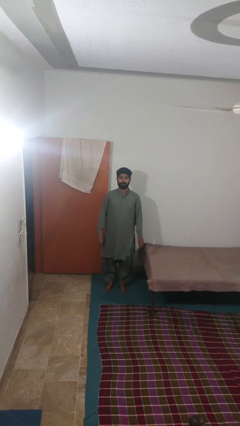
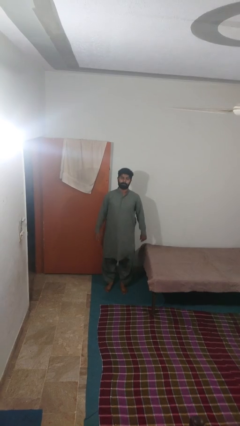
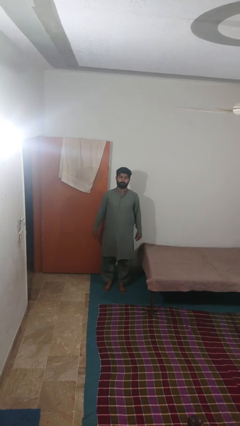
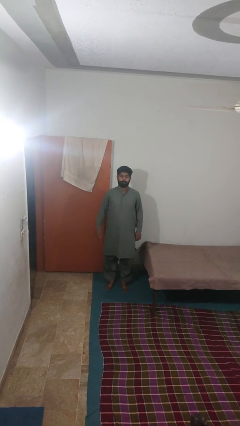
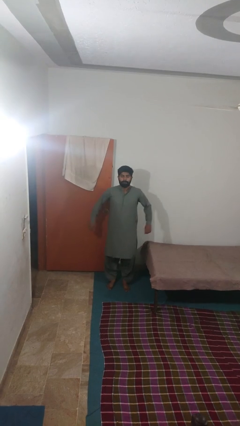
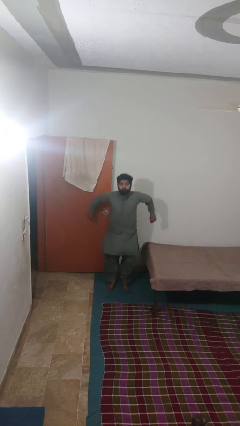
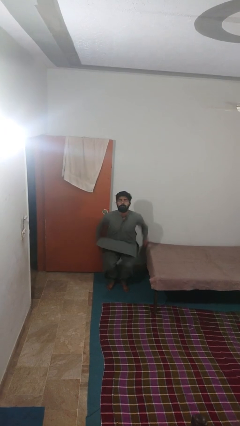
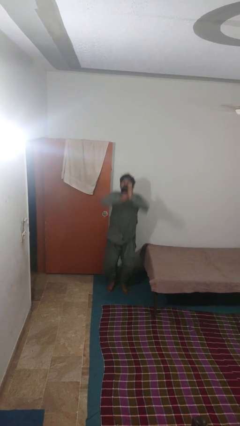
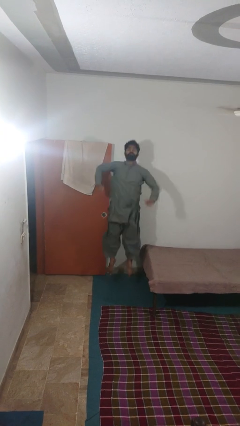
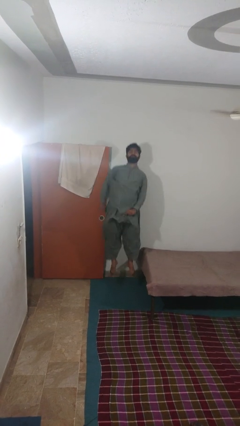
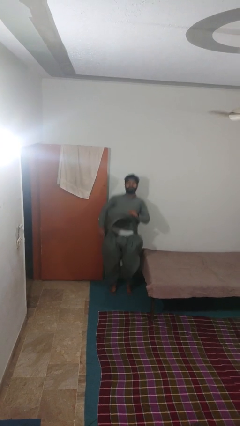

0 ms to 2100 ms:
person jumps

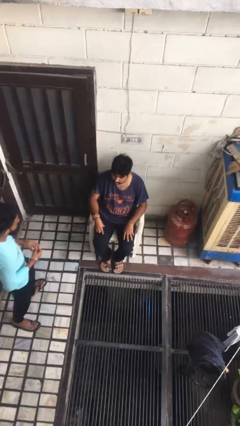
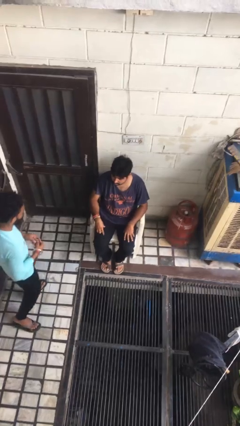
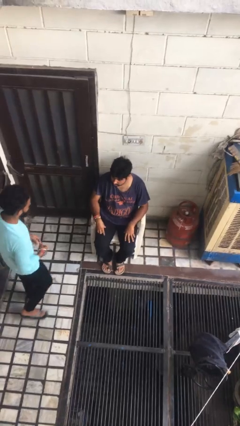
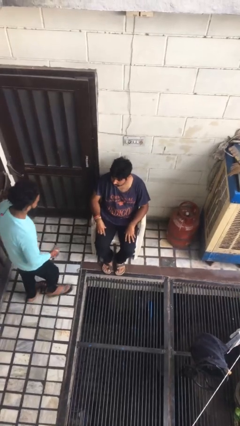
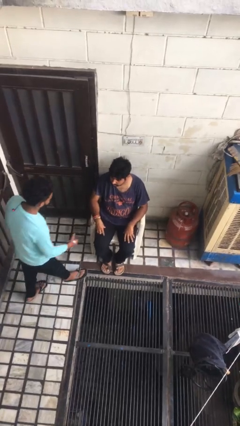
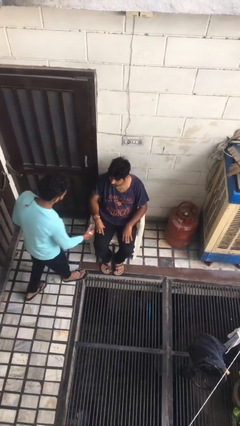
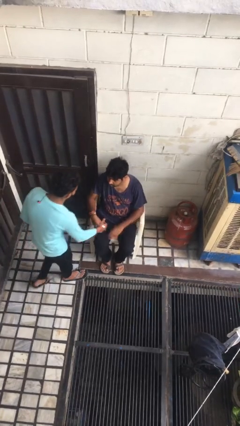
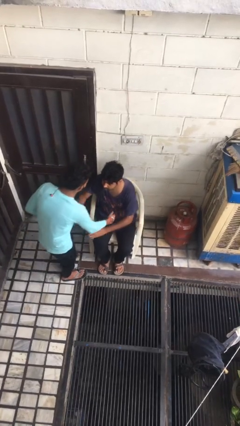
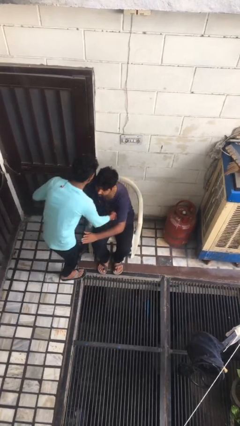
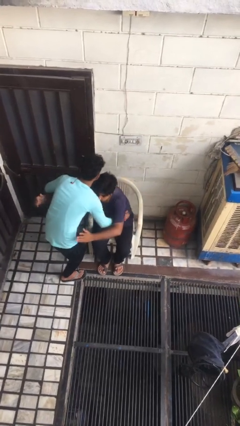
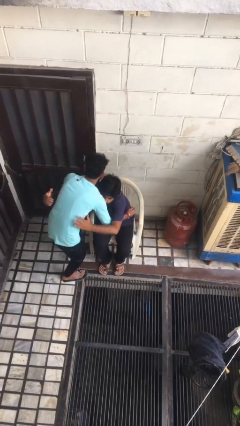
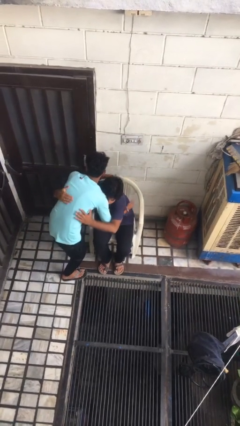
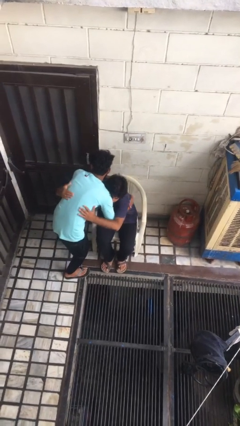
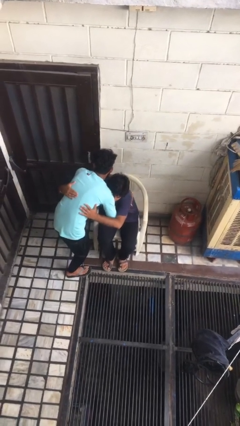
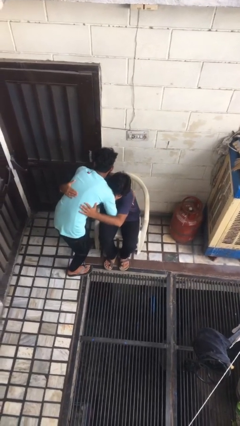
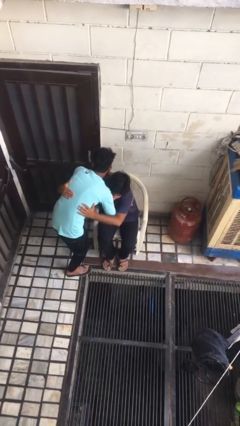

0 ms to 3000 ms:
person embraces person

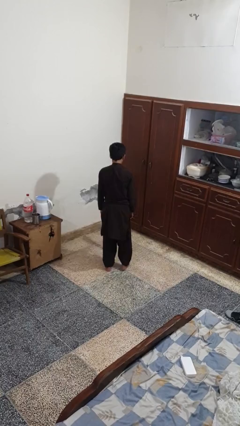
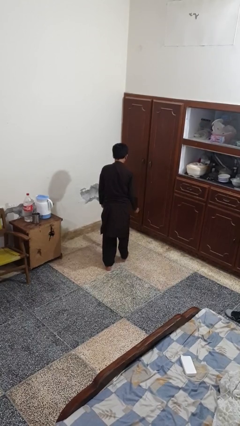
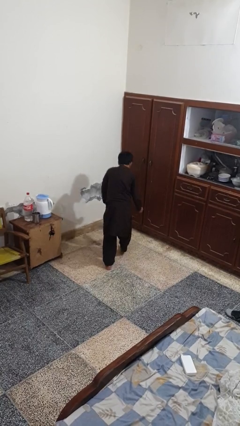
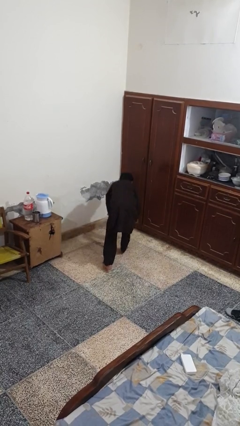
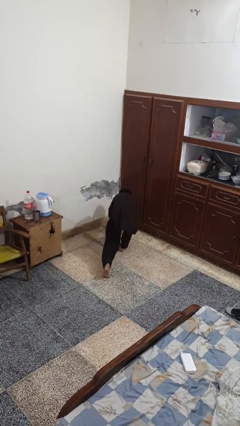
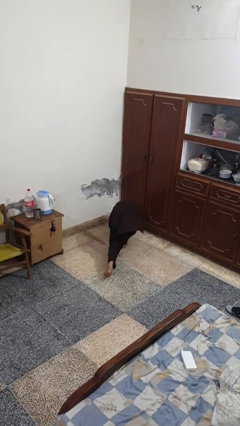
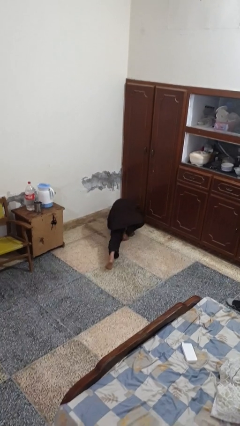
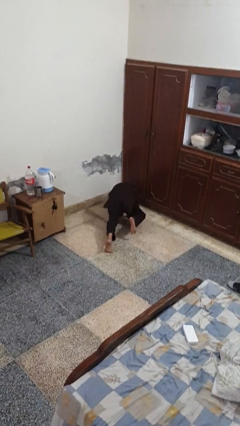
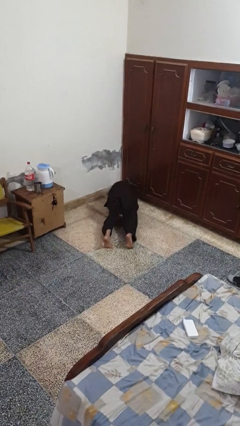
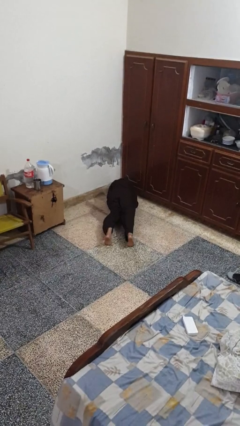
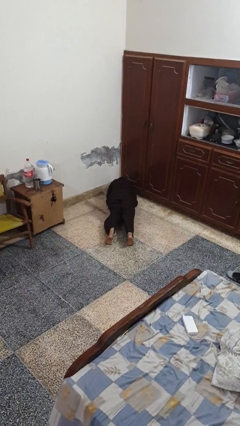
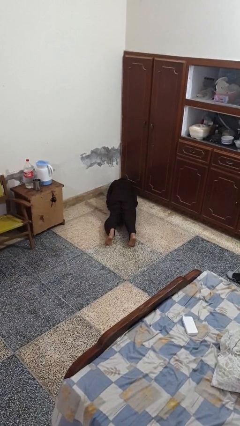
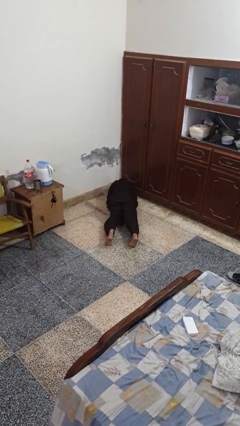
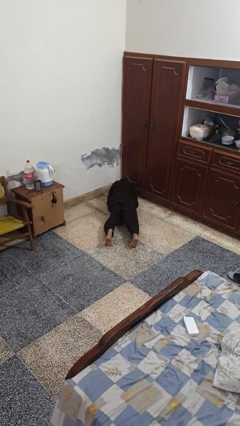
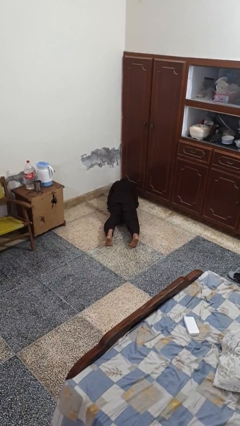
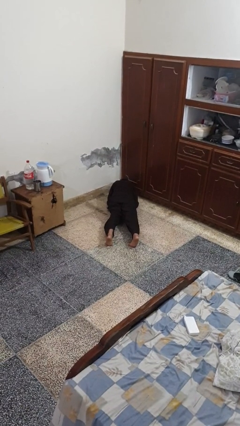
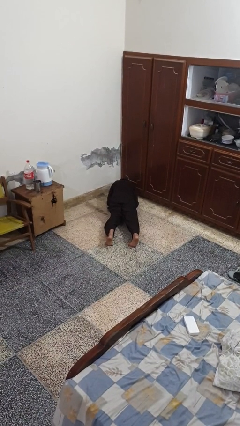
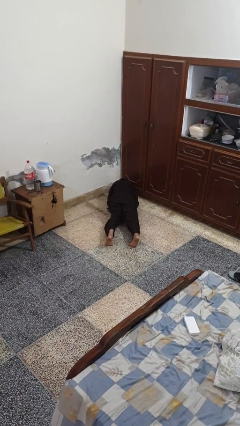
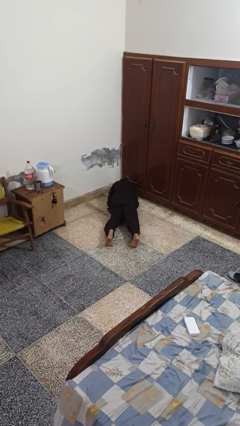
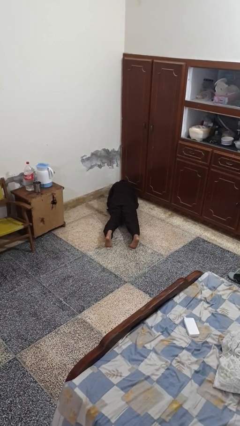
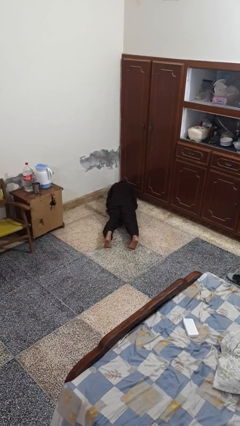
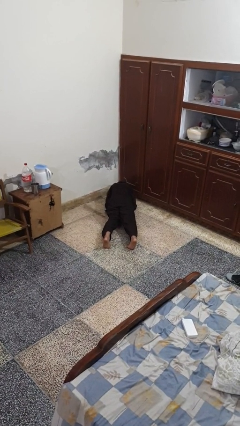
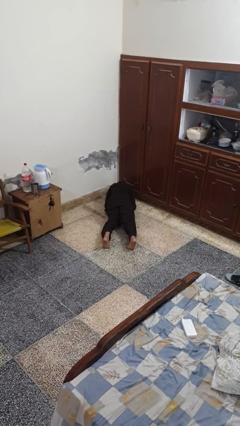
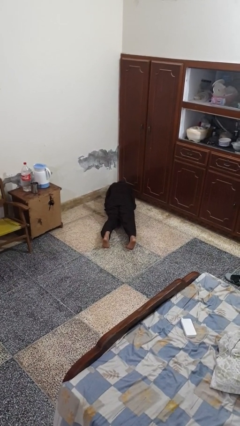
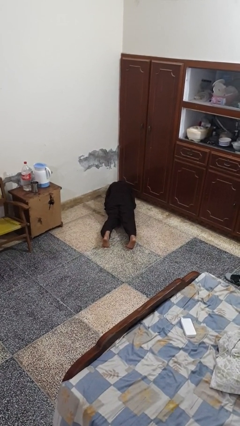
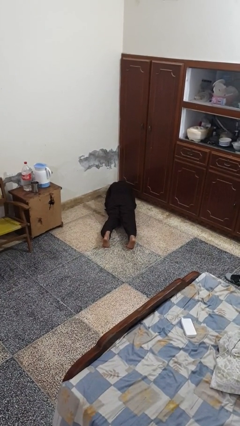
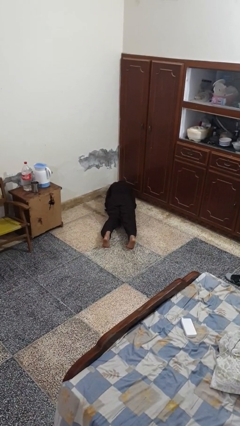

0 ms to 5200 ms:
person exercises with plank

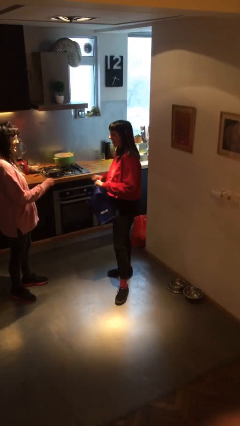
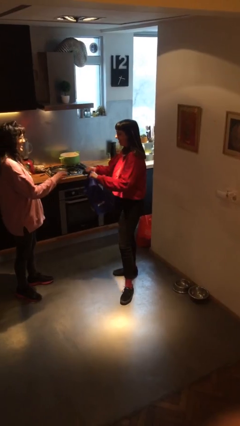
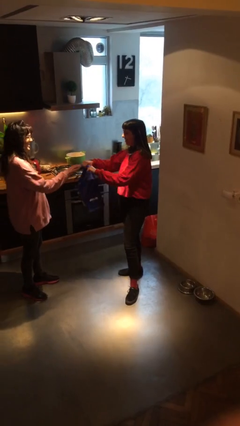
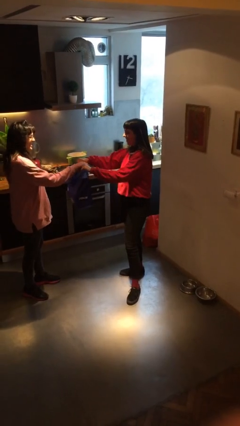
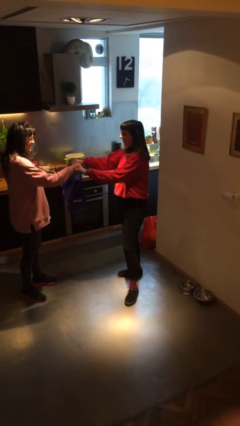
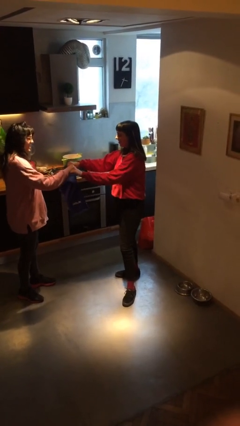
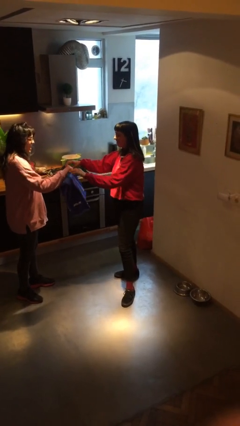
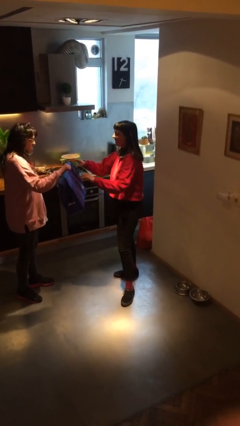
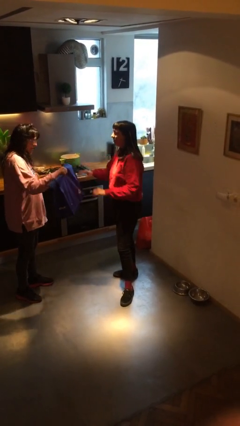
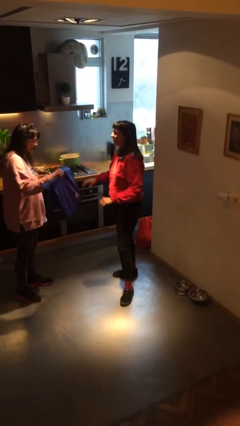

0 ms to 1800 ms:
person transfers object to person

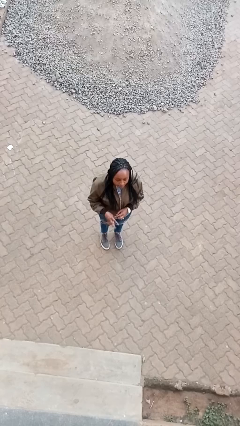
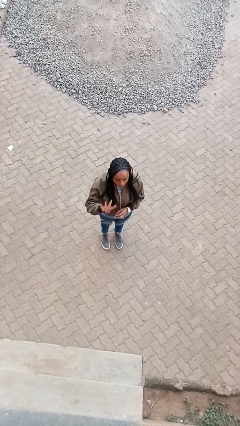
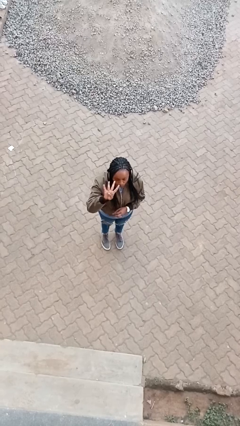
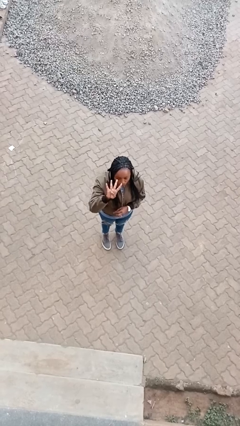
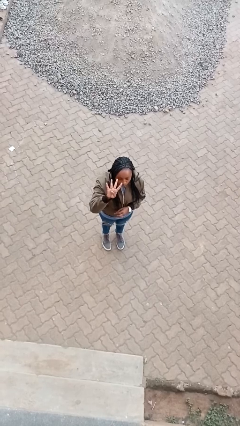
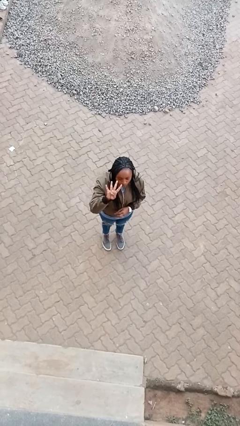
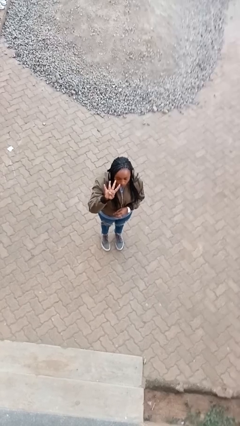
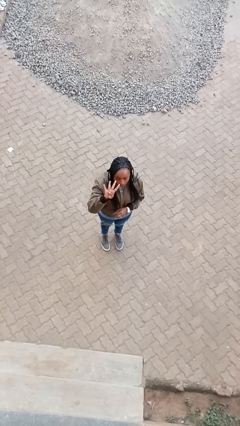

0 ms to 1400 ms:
person gestures number four

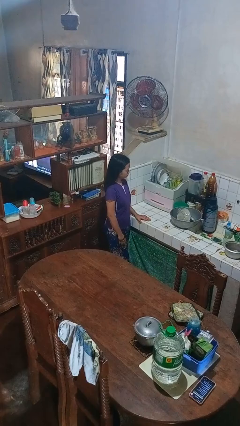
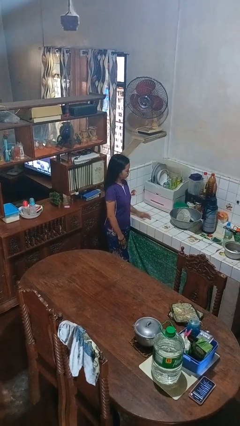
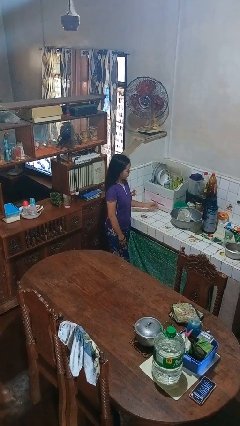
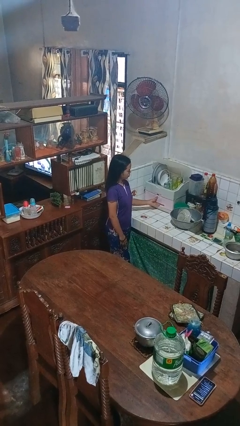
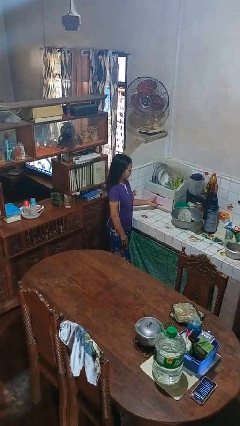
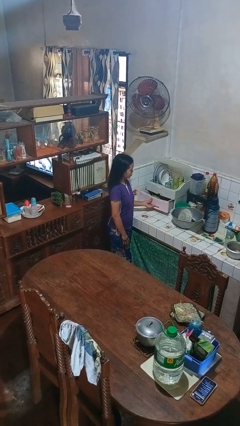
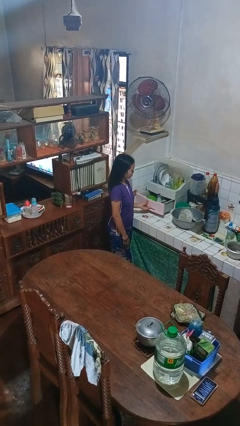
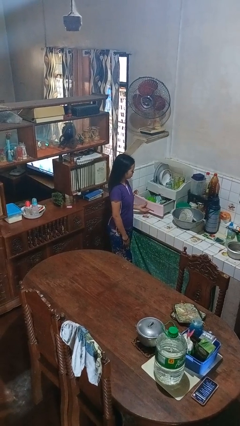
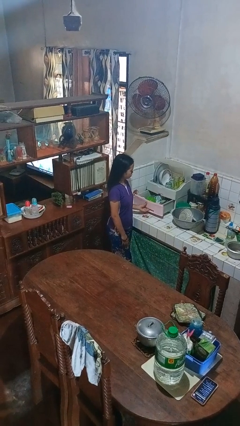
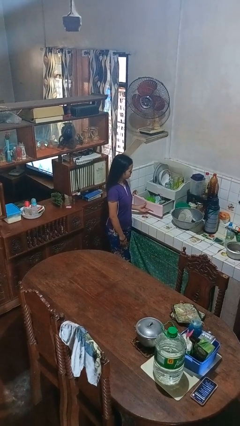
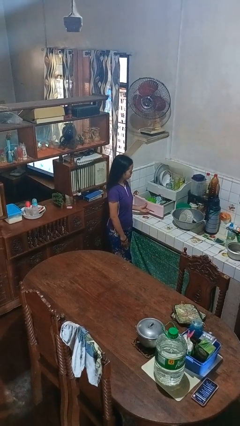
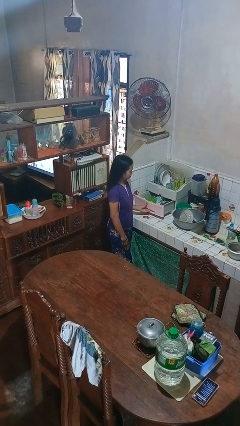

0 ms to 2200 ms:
person opens kitchen drawer

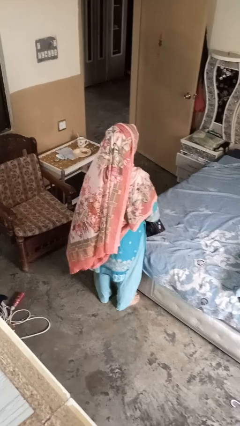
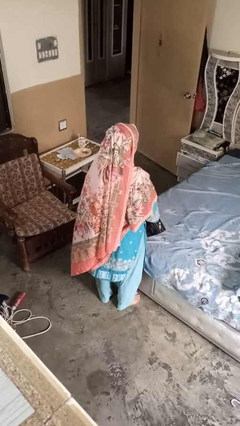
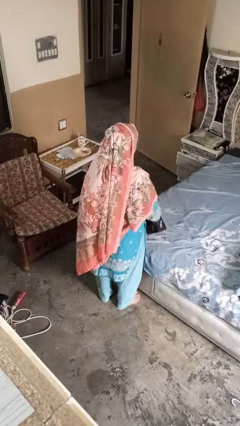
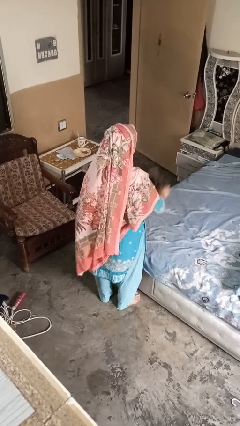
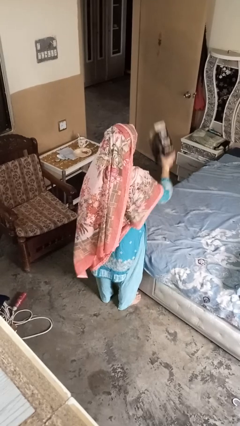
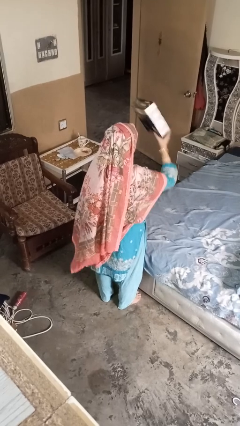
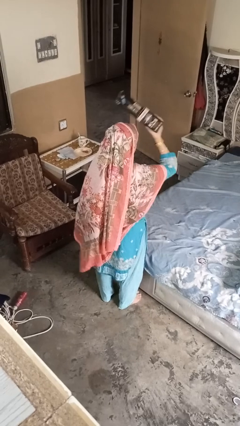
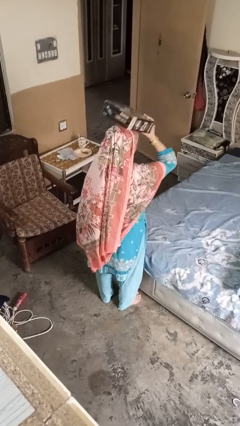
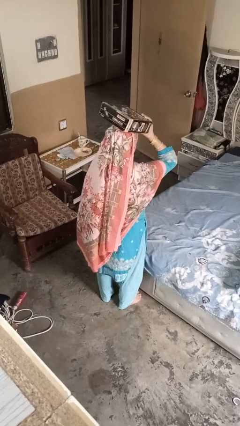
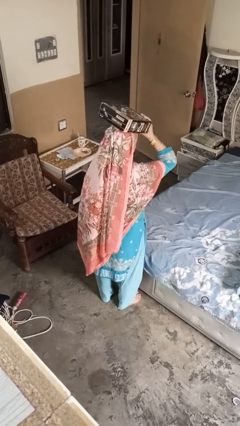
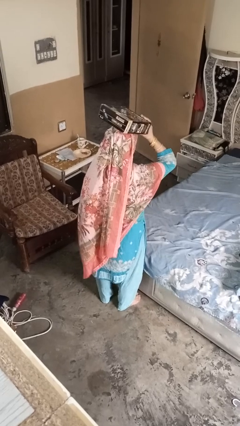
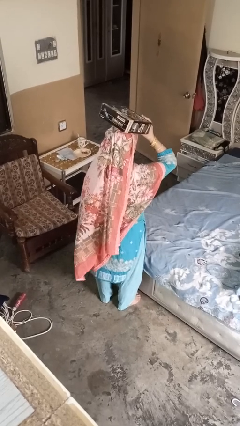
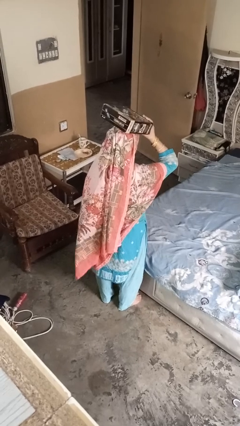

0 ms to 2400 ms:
person holds object above head
